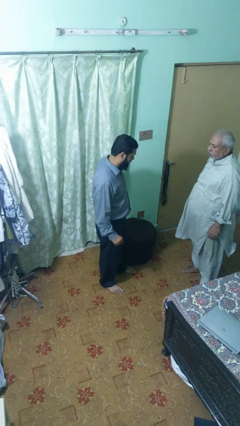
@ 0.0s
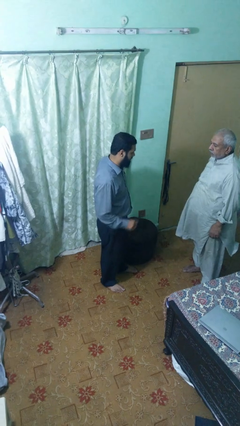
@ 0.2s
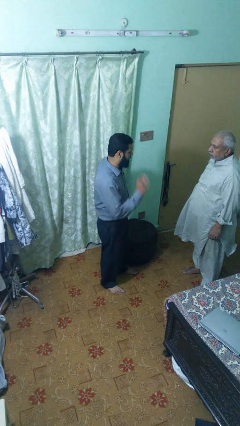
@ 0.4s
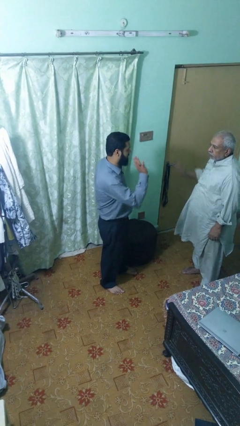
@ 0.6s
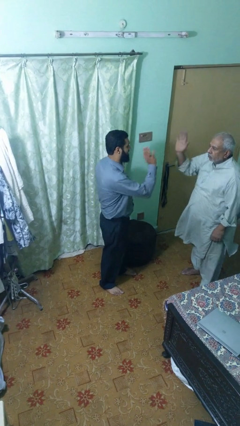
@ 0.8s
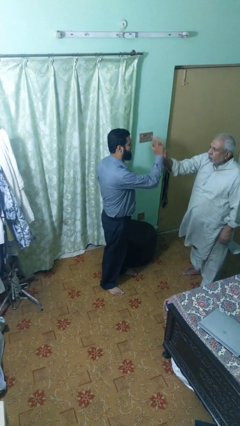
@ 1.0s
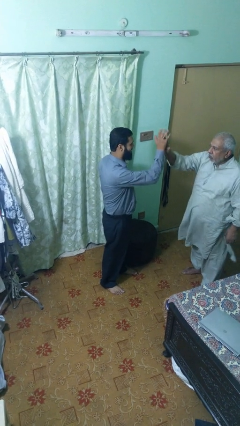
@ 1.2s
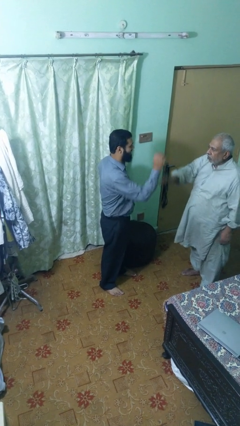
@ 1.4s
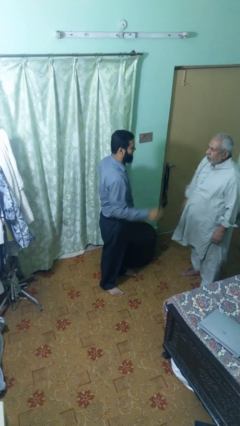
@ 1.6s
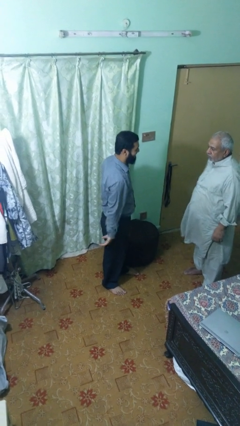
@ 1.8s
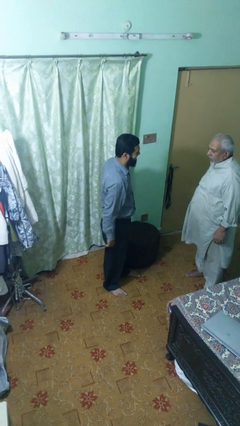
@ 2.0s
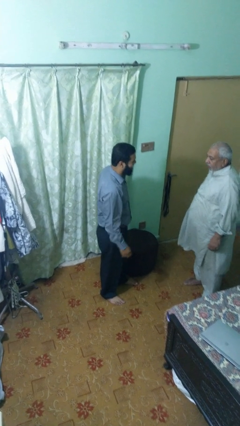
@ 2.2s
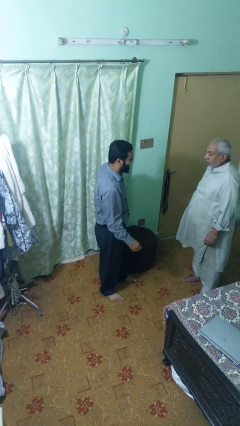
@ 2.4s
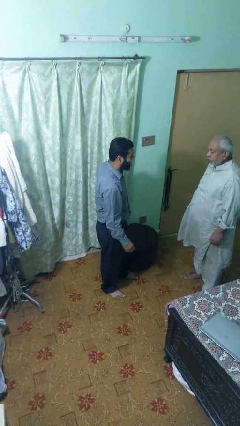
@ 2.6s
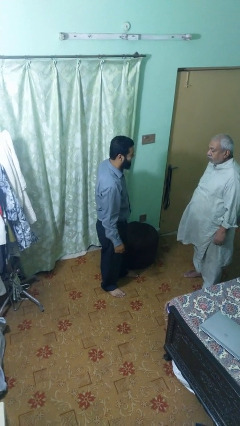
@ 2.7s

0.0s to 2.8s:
person highfives hand

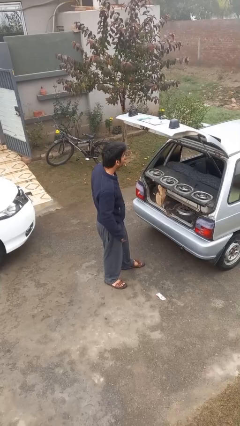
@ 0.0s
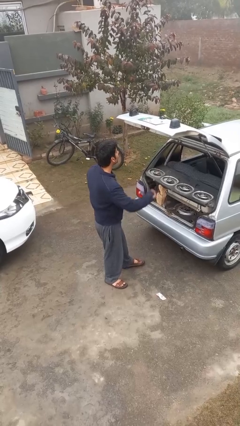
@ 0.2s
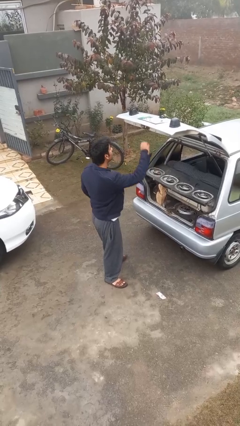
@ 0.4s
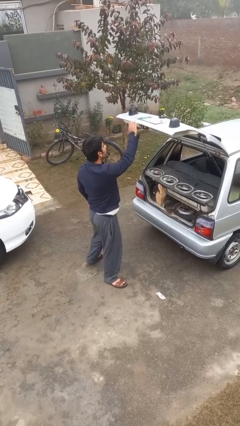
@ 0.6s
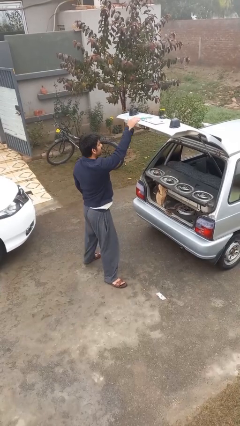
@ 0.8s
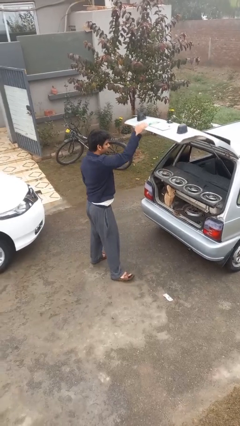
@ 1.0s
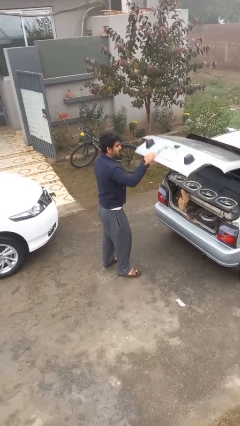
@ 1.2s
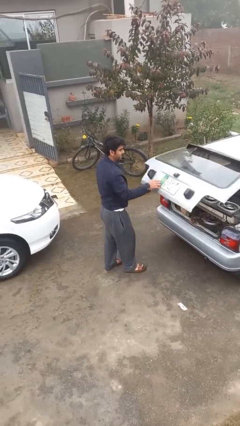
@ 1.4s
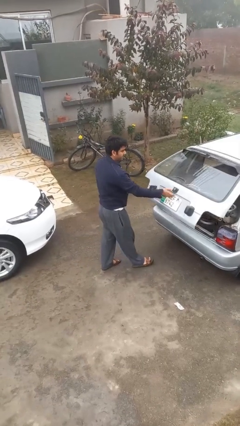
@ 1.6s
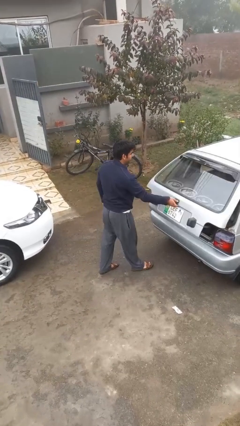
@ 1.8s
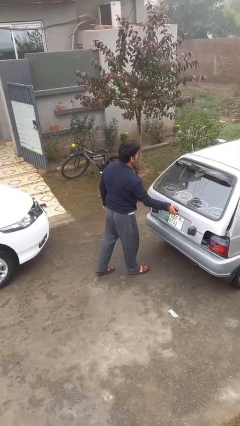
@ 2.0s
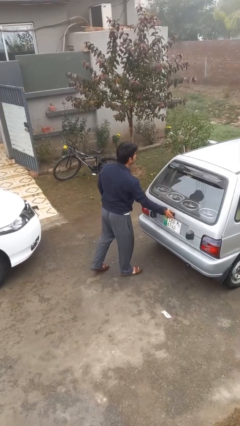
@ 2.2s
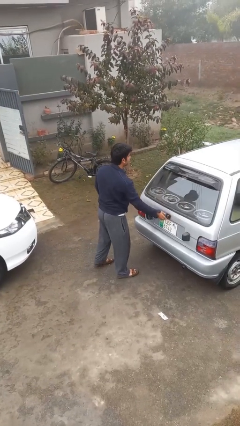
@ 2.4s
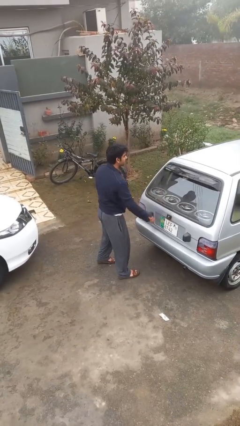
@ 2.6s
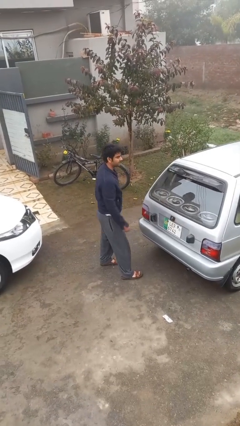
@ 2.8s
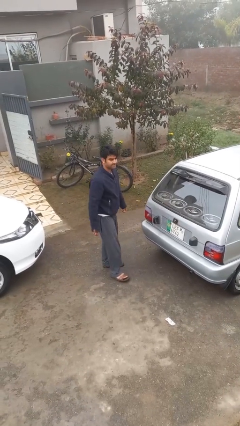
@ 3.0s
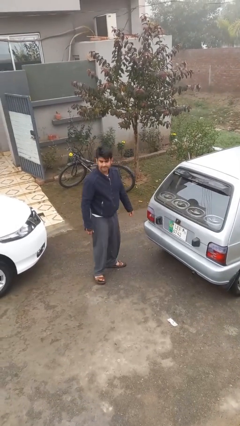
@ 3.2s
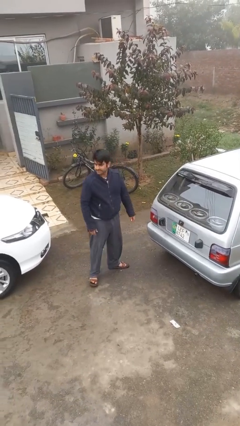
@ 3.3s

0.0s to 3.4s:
person closes car trunk

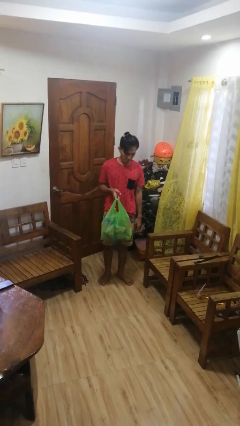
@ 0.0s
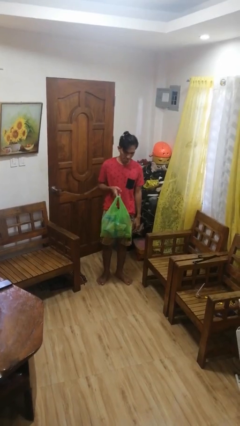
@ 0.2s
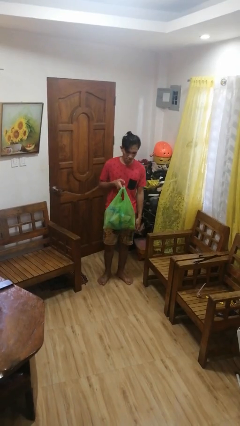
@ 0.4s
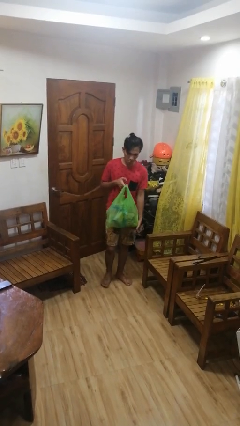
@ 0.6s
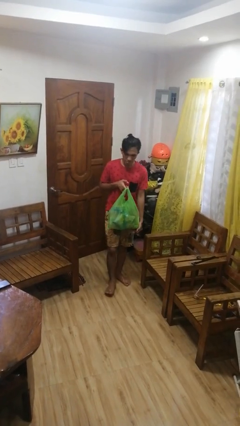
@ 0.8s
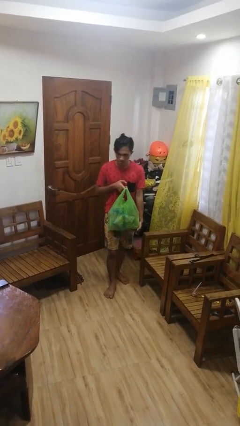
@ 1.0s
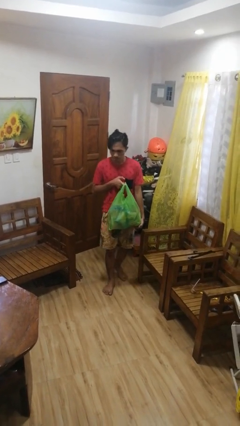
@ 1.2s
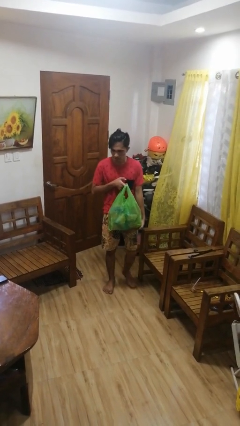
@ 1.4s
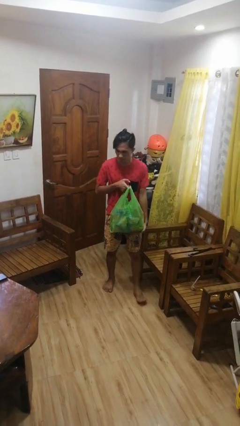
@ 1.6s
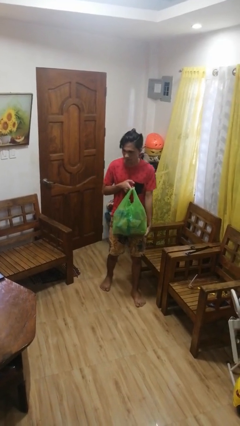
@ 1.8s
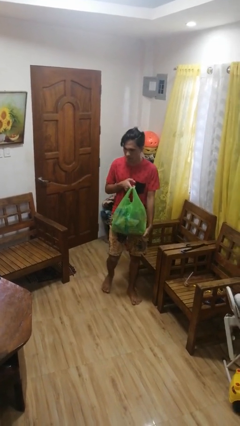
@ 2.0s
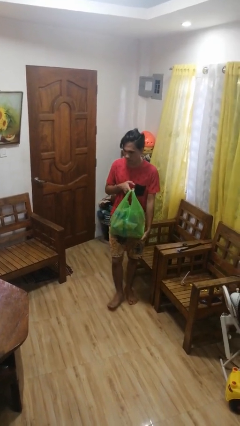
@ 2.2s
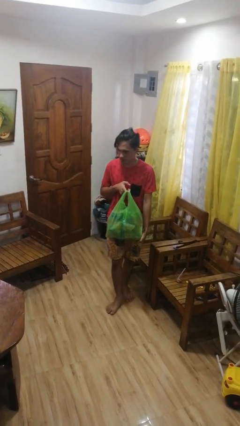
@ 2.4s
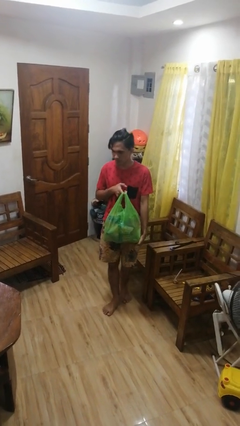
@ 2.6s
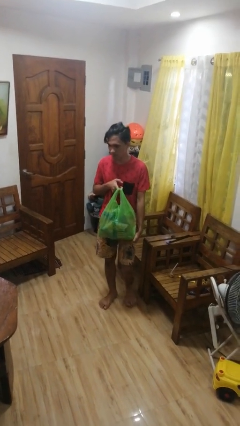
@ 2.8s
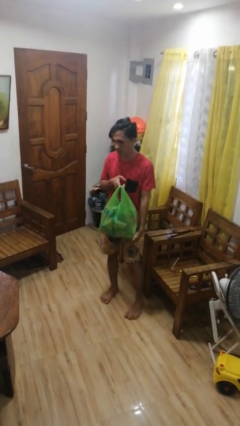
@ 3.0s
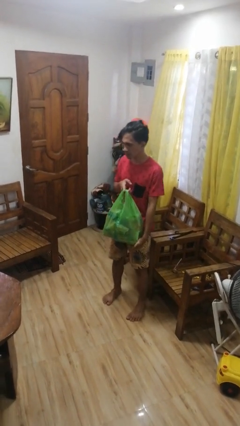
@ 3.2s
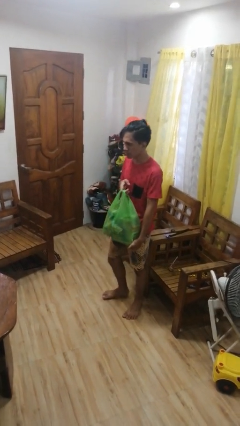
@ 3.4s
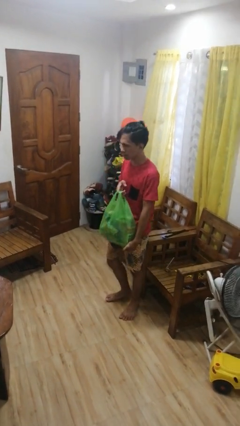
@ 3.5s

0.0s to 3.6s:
person carries groceries

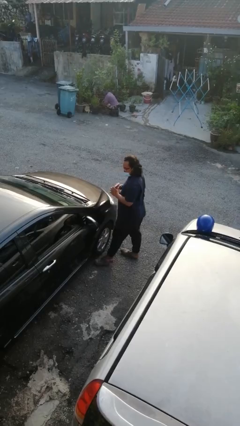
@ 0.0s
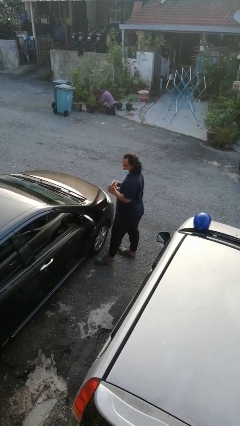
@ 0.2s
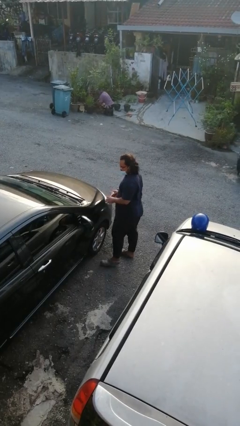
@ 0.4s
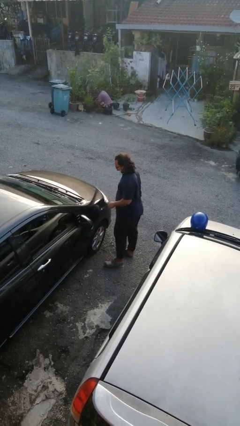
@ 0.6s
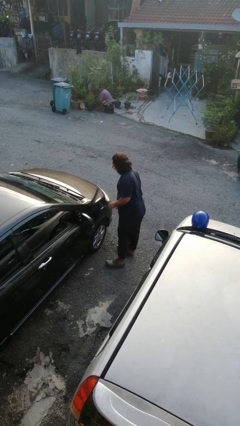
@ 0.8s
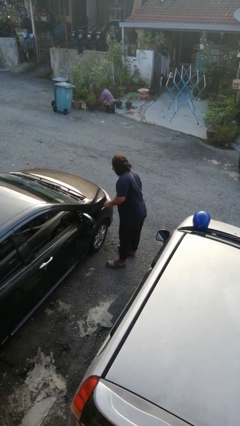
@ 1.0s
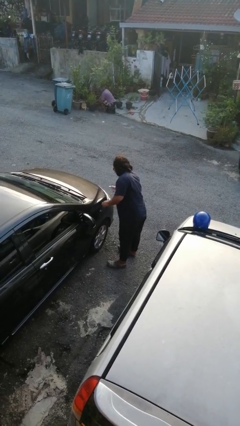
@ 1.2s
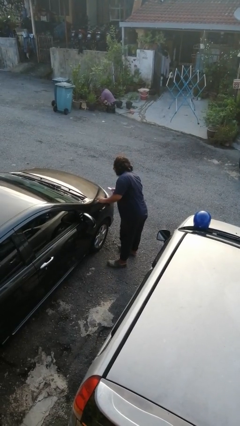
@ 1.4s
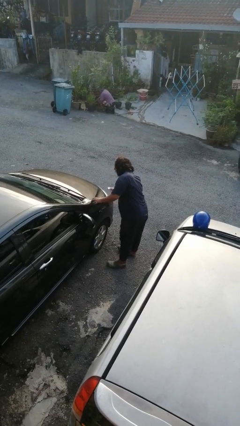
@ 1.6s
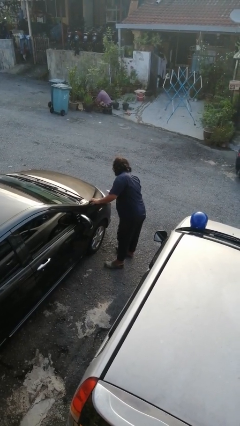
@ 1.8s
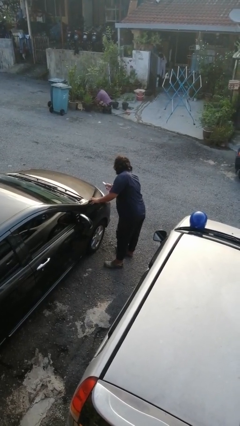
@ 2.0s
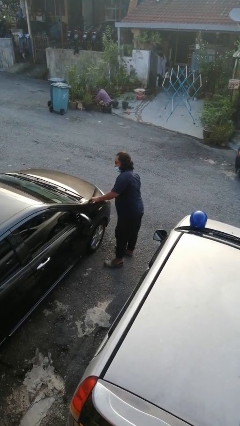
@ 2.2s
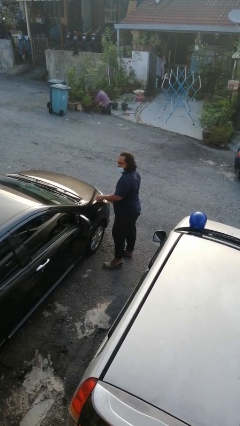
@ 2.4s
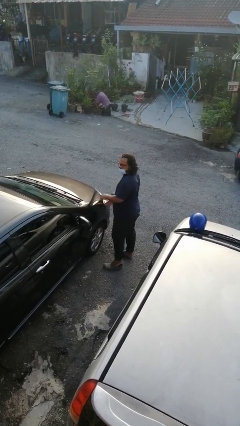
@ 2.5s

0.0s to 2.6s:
person polishes car with rag

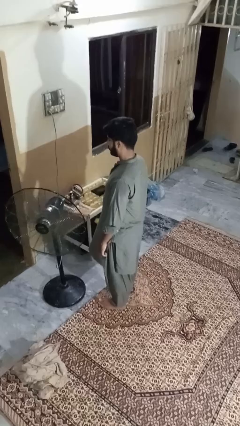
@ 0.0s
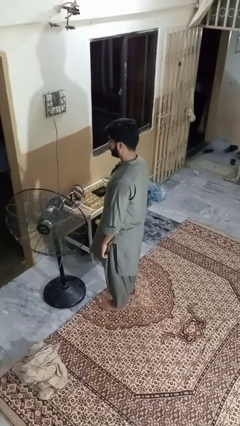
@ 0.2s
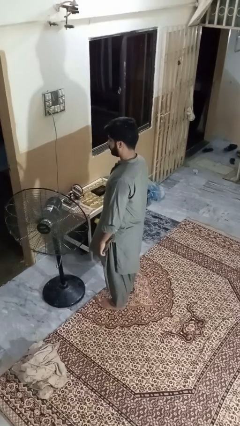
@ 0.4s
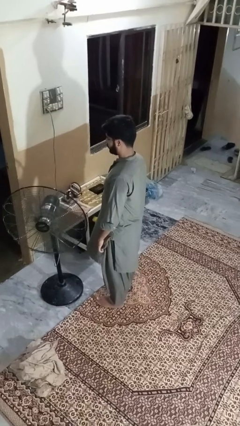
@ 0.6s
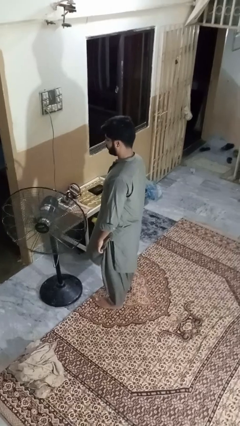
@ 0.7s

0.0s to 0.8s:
person turns off fan

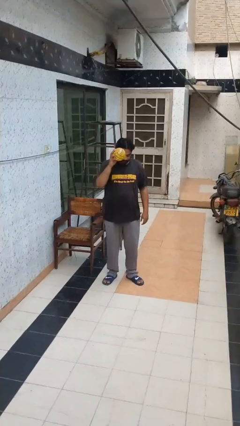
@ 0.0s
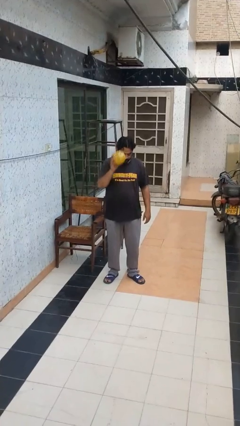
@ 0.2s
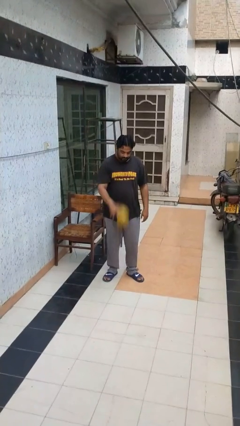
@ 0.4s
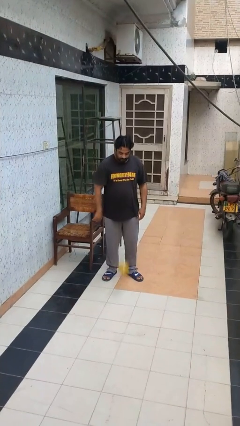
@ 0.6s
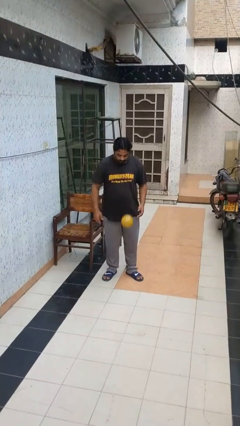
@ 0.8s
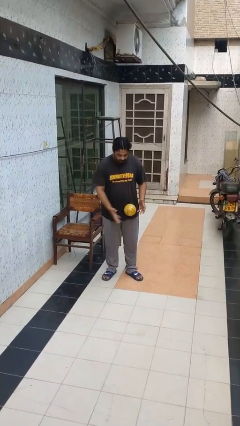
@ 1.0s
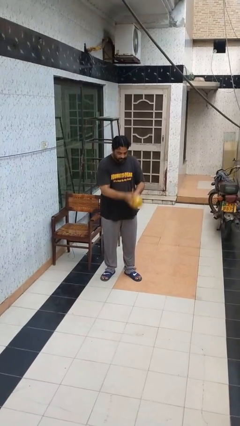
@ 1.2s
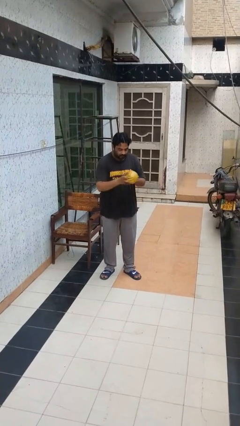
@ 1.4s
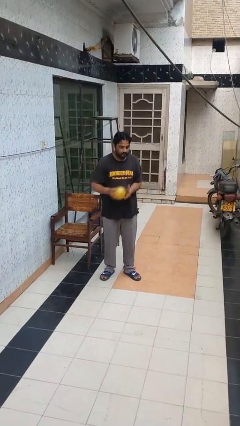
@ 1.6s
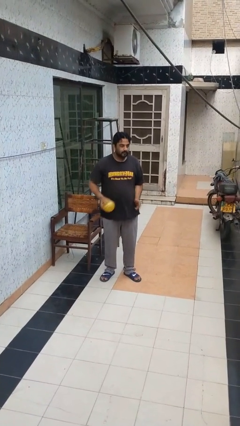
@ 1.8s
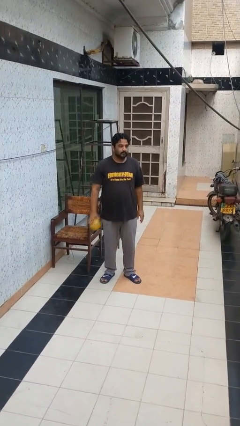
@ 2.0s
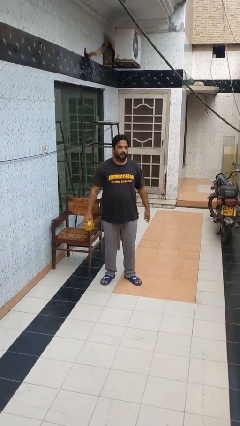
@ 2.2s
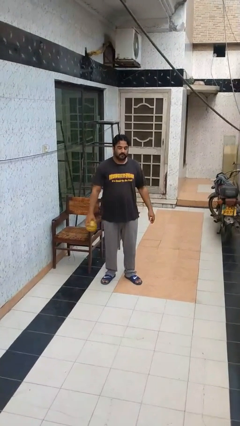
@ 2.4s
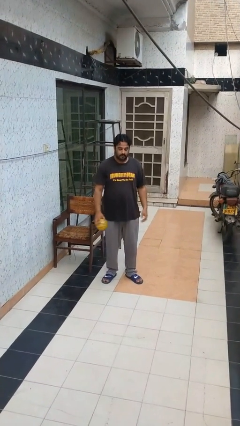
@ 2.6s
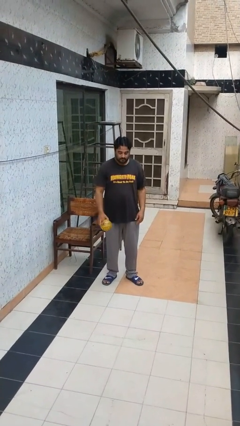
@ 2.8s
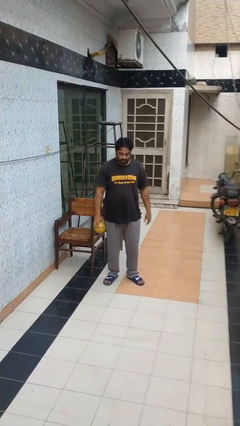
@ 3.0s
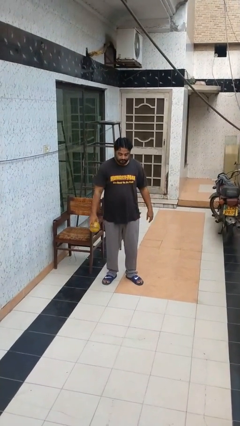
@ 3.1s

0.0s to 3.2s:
person bounces ball on floor

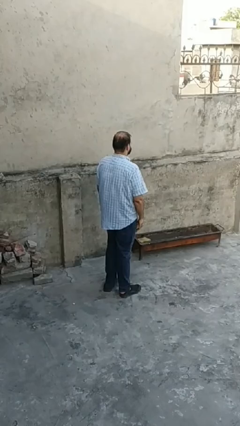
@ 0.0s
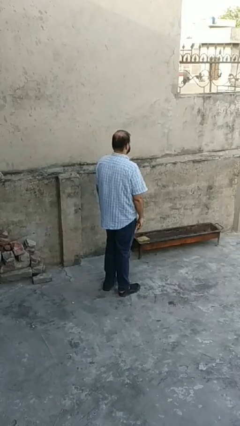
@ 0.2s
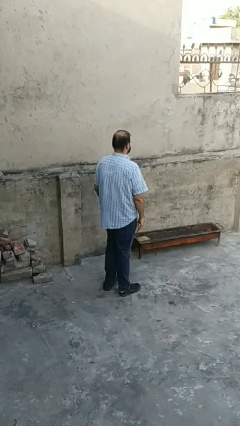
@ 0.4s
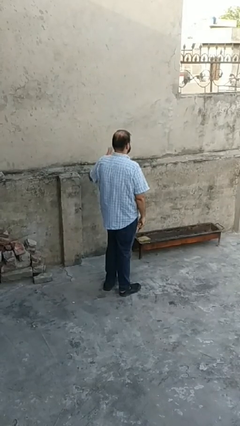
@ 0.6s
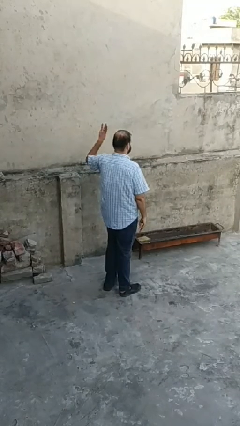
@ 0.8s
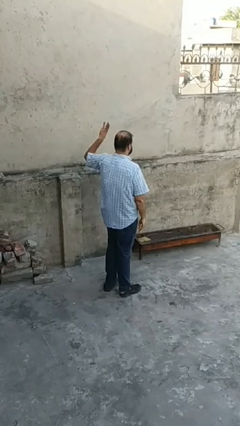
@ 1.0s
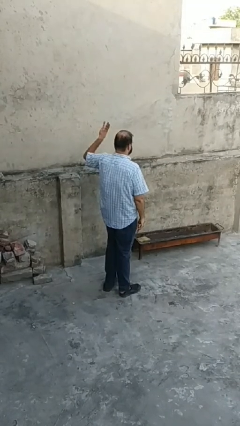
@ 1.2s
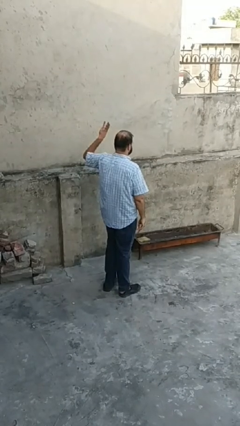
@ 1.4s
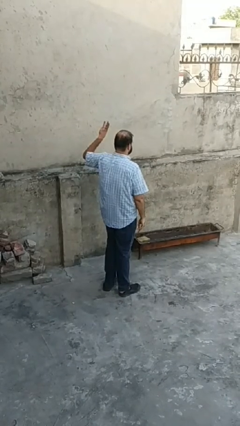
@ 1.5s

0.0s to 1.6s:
person gestures number three
